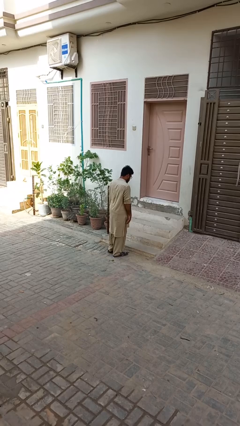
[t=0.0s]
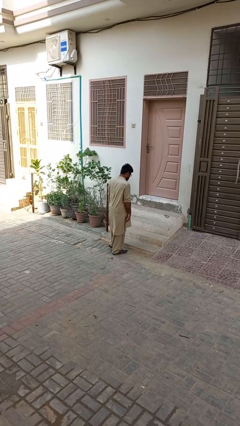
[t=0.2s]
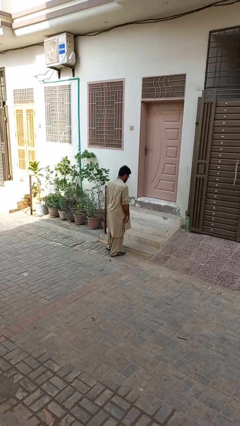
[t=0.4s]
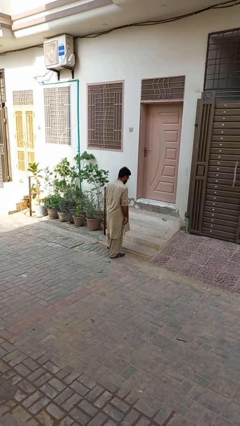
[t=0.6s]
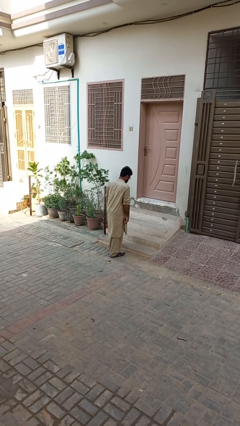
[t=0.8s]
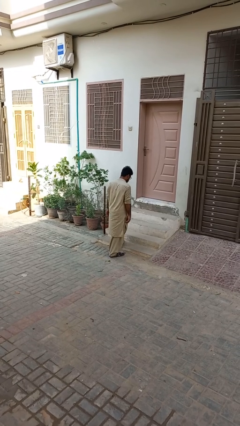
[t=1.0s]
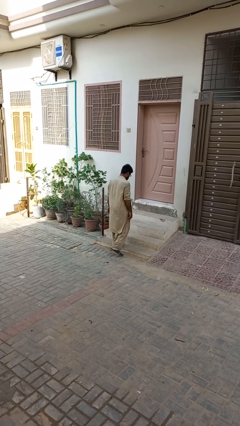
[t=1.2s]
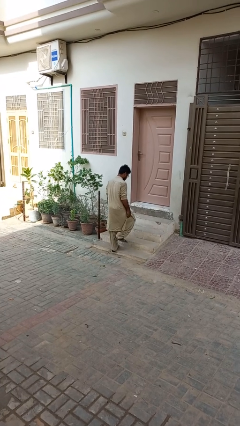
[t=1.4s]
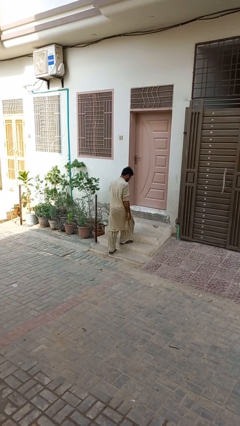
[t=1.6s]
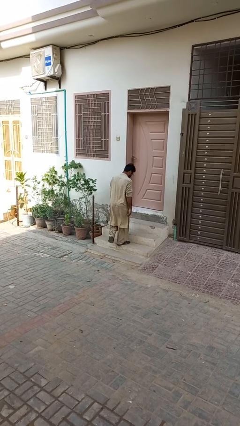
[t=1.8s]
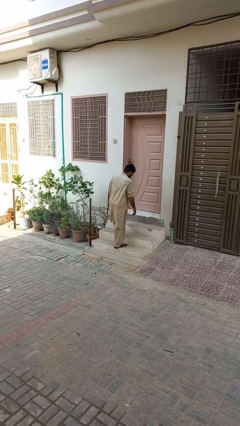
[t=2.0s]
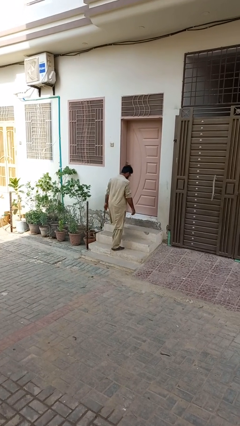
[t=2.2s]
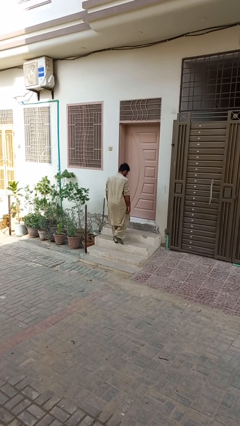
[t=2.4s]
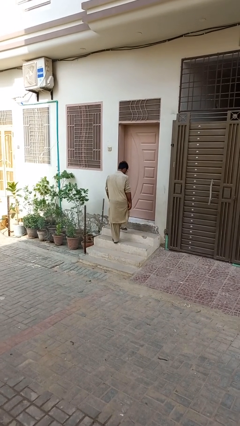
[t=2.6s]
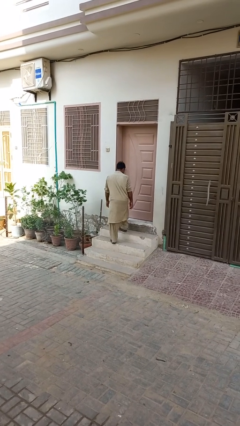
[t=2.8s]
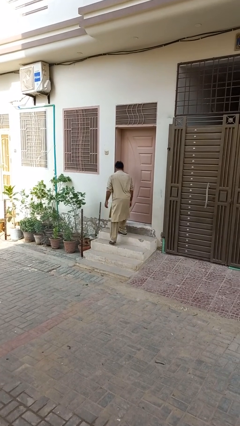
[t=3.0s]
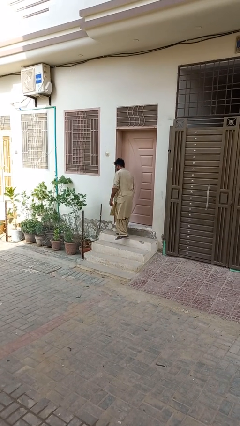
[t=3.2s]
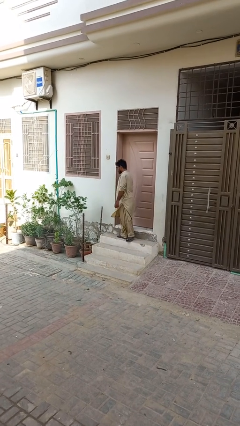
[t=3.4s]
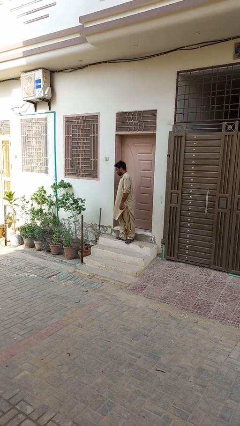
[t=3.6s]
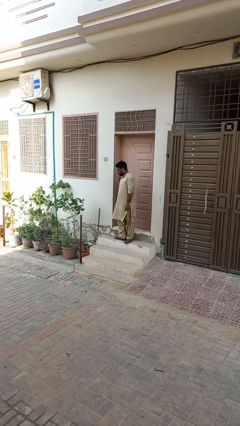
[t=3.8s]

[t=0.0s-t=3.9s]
person climbs up stairs

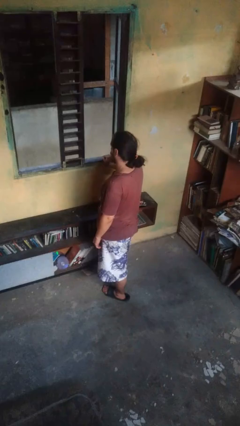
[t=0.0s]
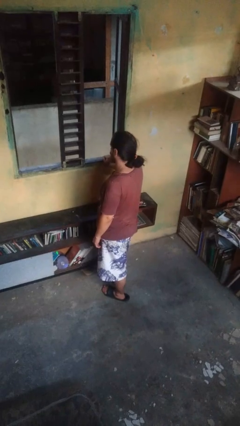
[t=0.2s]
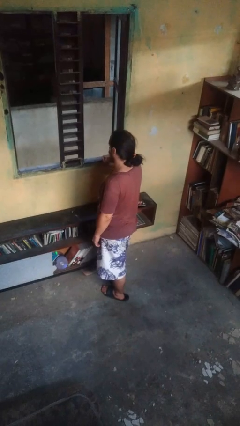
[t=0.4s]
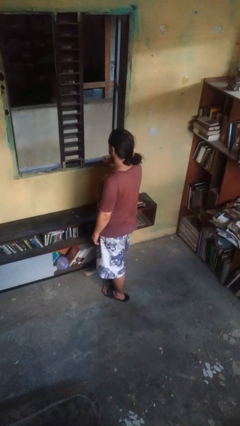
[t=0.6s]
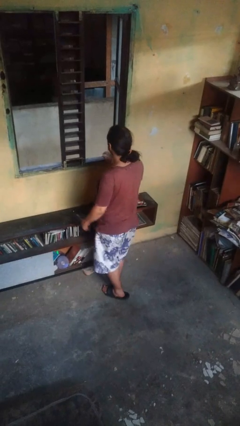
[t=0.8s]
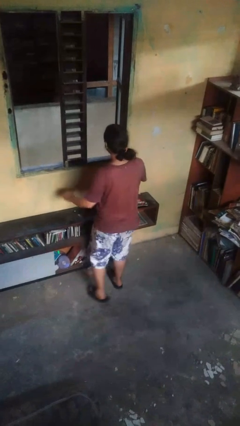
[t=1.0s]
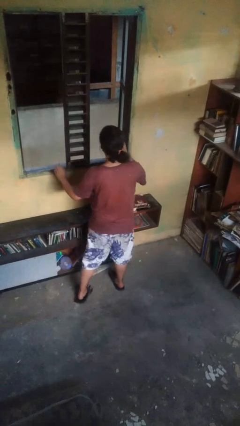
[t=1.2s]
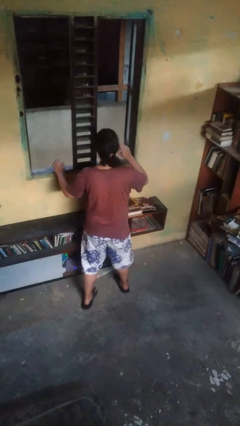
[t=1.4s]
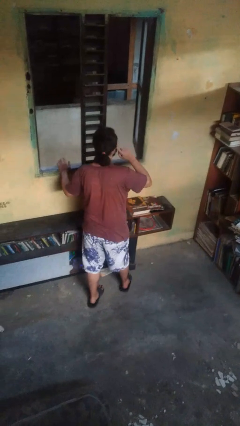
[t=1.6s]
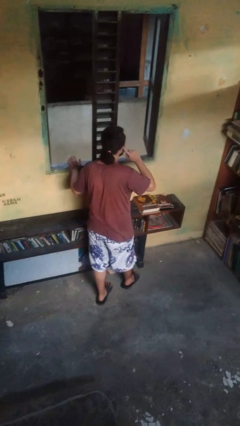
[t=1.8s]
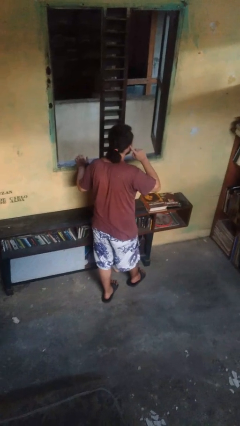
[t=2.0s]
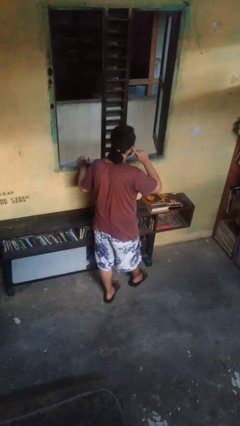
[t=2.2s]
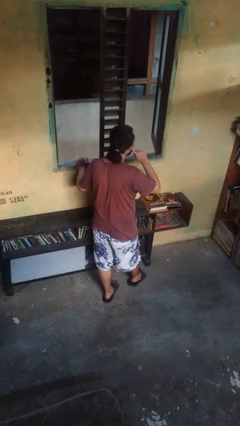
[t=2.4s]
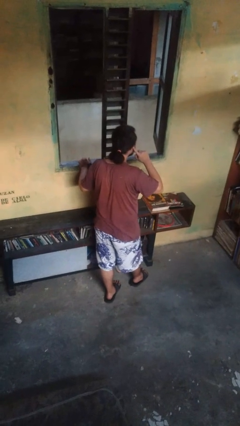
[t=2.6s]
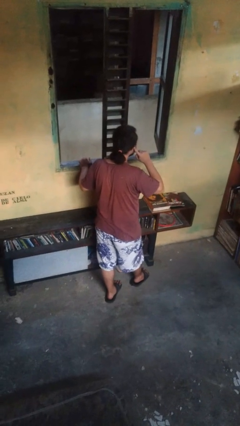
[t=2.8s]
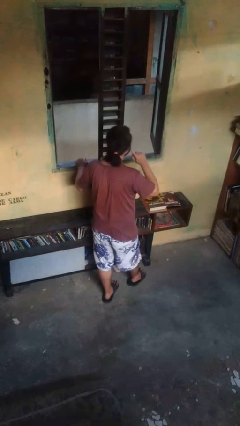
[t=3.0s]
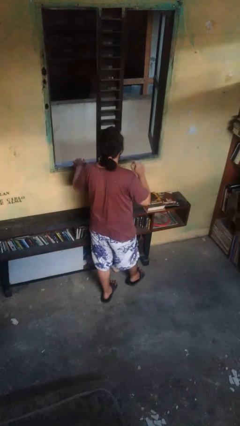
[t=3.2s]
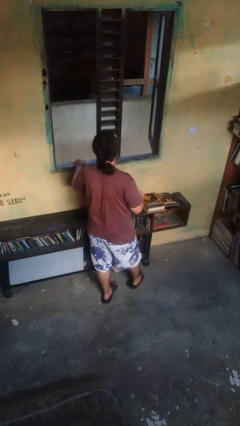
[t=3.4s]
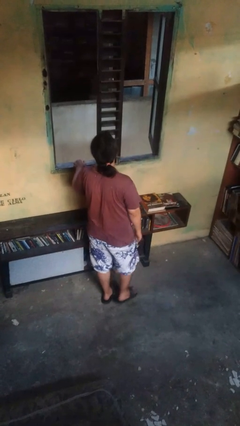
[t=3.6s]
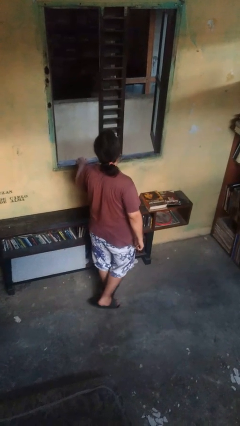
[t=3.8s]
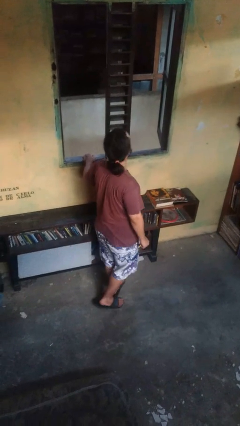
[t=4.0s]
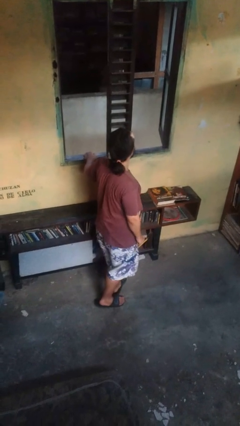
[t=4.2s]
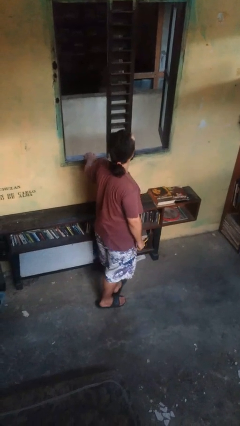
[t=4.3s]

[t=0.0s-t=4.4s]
person gestures listen closely

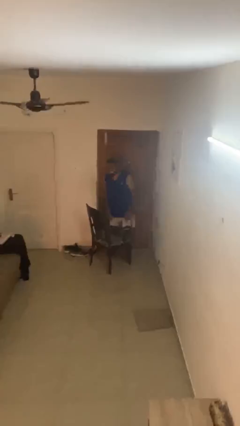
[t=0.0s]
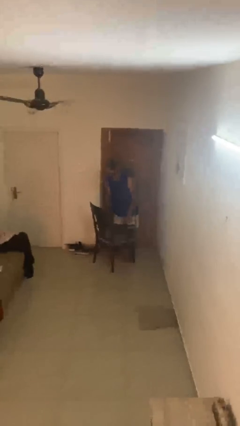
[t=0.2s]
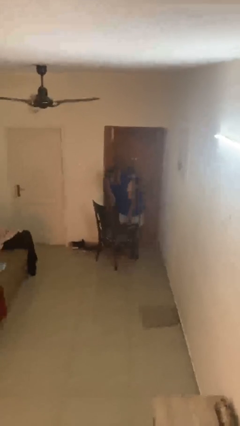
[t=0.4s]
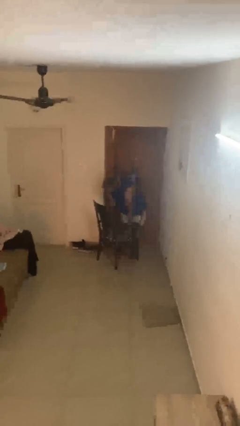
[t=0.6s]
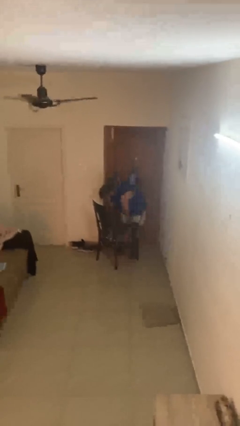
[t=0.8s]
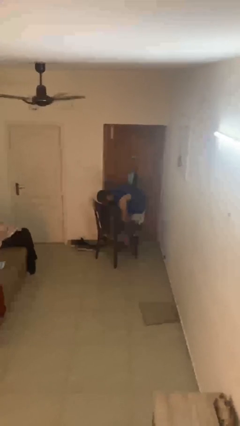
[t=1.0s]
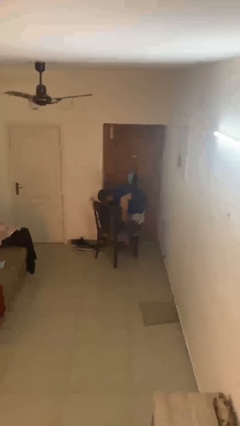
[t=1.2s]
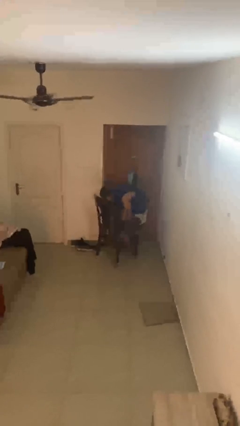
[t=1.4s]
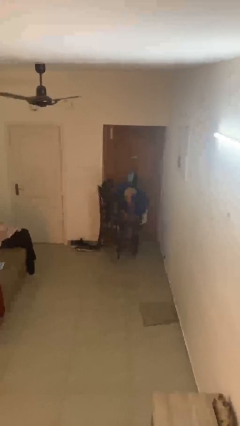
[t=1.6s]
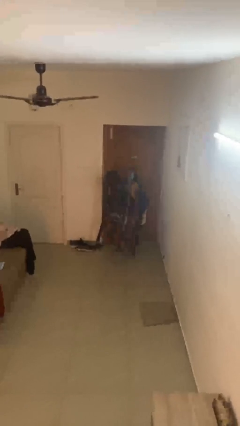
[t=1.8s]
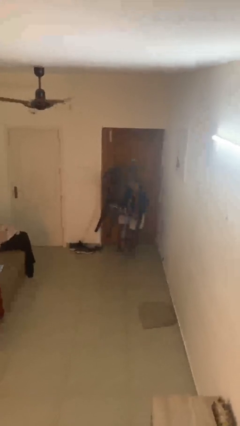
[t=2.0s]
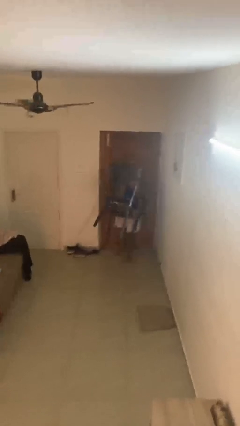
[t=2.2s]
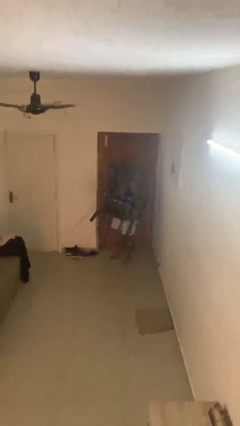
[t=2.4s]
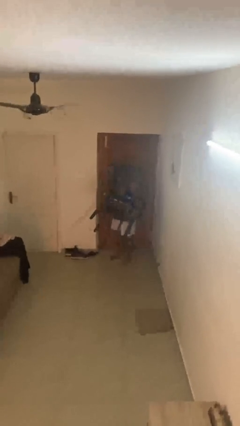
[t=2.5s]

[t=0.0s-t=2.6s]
person picks up object from floor

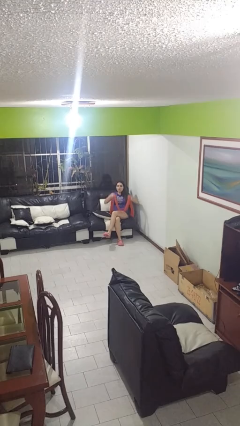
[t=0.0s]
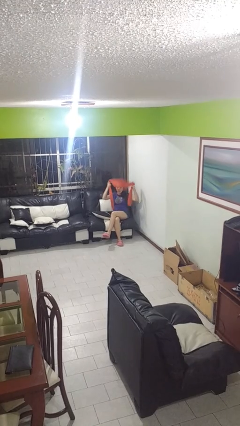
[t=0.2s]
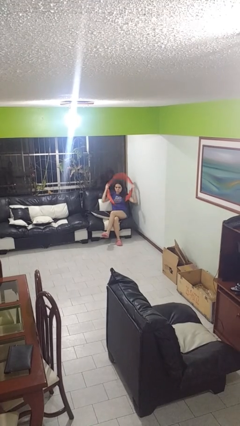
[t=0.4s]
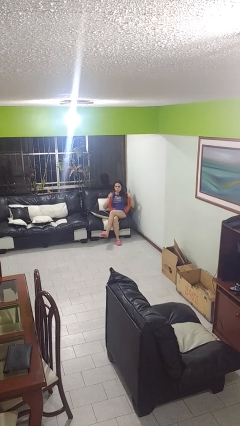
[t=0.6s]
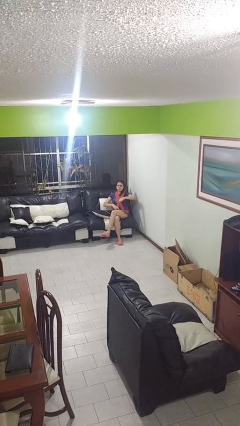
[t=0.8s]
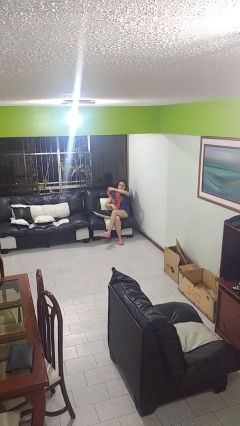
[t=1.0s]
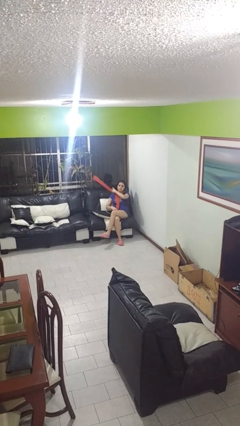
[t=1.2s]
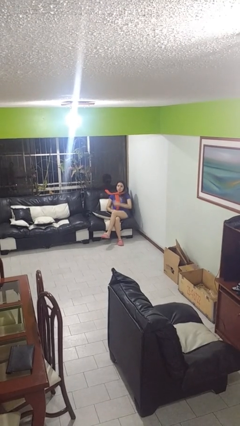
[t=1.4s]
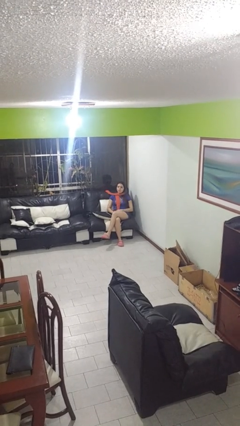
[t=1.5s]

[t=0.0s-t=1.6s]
person puts on scarf

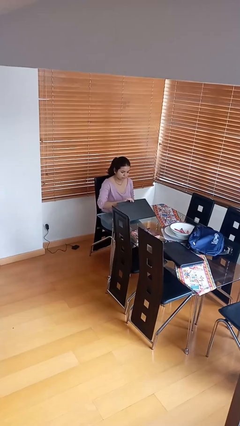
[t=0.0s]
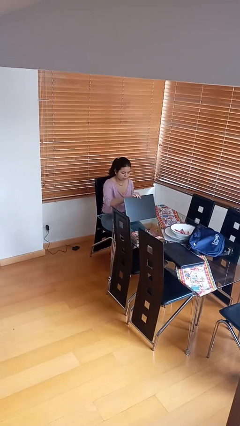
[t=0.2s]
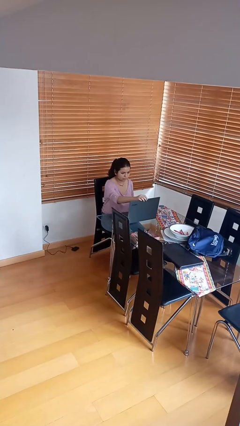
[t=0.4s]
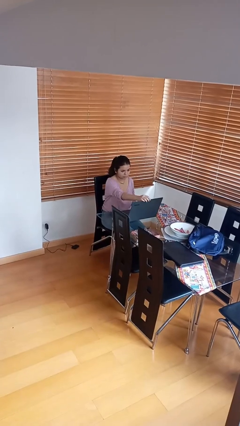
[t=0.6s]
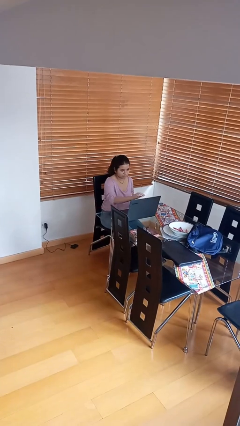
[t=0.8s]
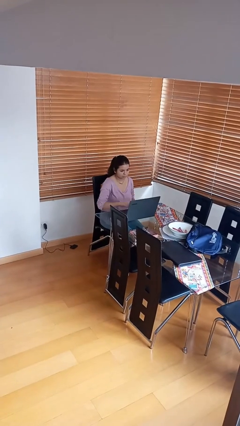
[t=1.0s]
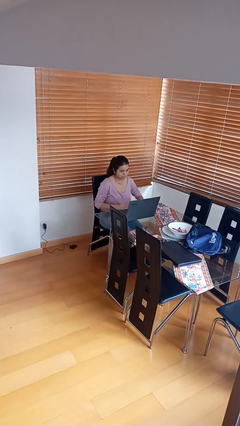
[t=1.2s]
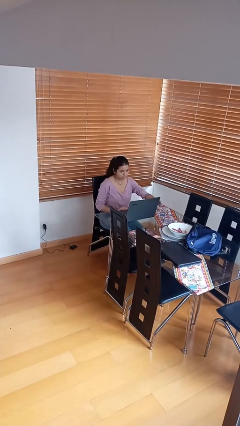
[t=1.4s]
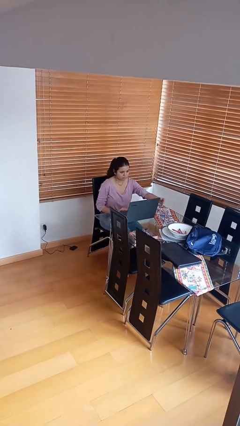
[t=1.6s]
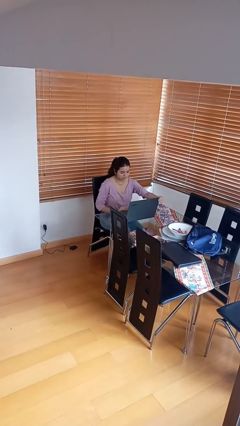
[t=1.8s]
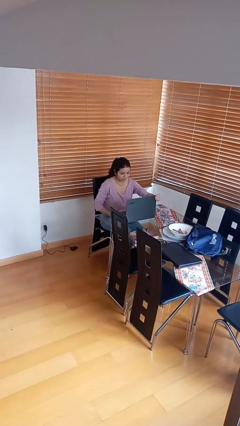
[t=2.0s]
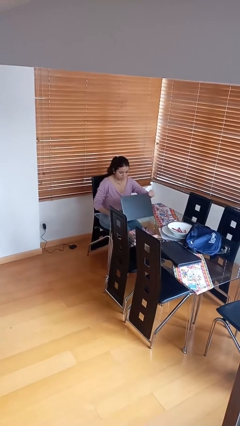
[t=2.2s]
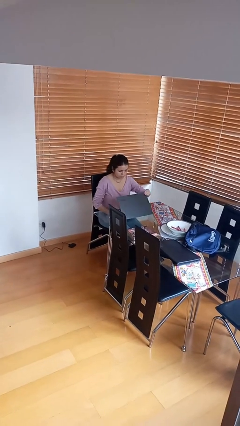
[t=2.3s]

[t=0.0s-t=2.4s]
person interacts with laptop

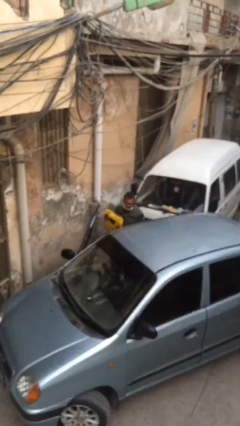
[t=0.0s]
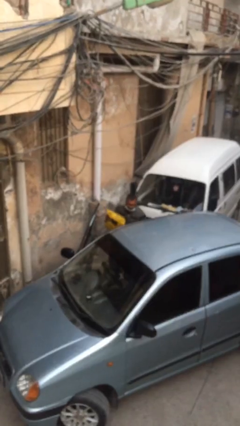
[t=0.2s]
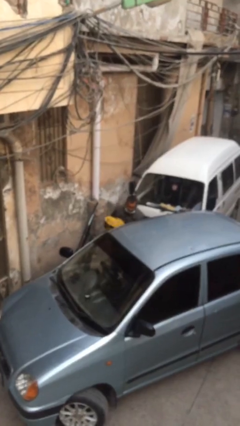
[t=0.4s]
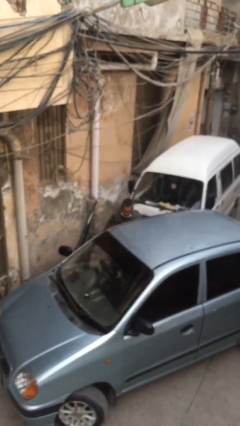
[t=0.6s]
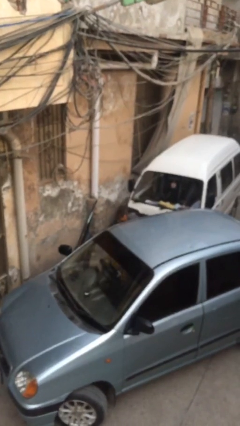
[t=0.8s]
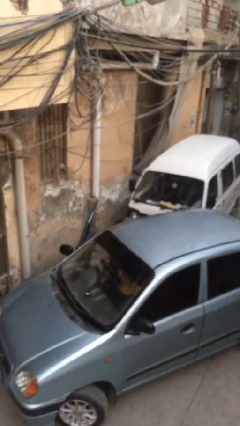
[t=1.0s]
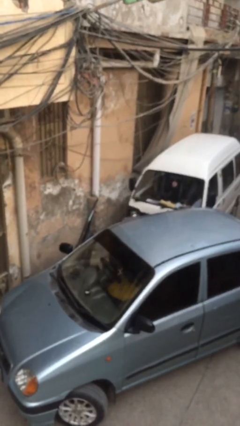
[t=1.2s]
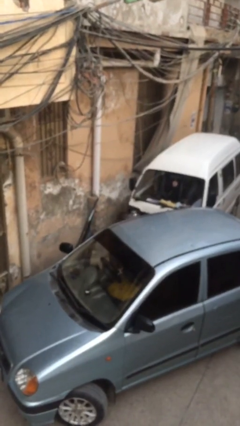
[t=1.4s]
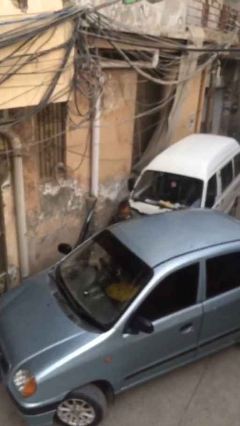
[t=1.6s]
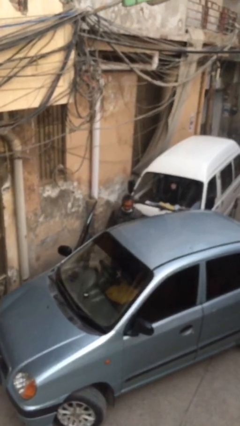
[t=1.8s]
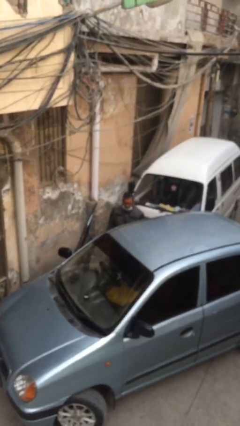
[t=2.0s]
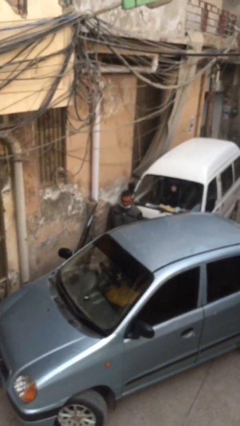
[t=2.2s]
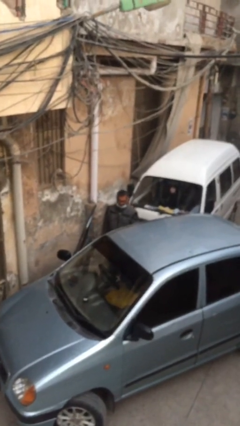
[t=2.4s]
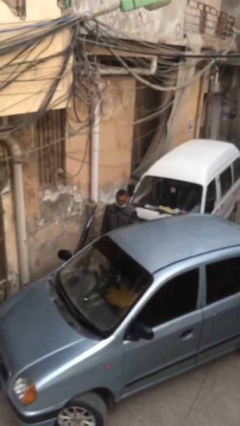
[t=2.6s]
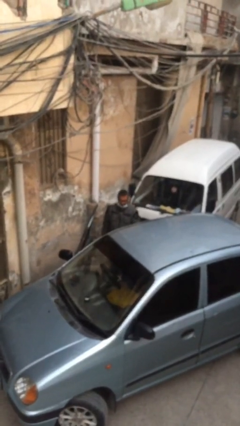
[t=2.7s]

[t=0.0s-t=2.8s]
person loads car
